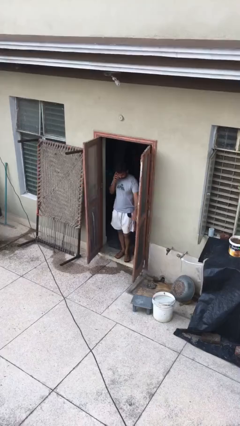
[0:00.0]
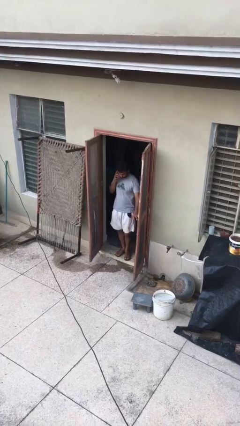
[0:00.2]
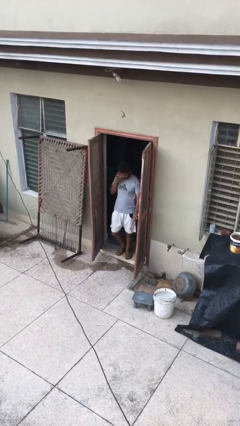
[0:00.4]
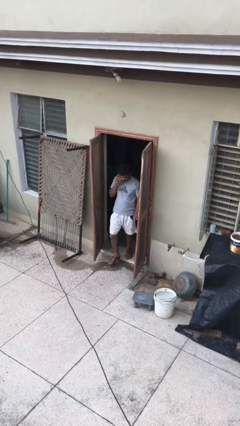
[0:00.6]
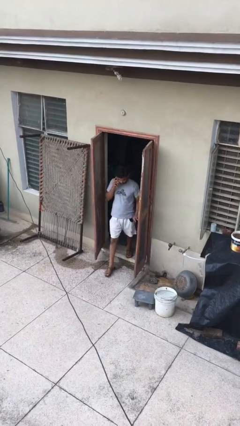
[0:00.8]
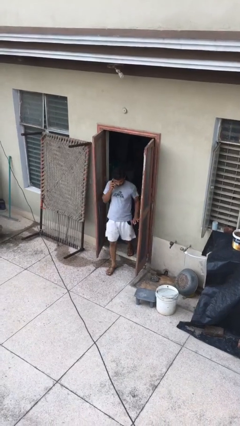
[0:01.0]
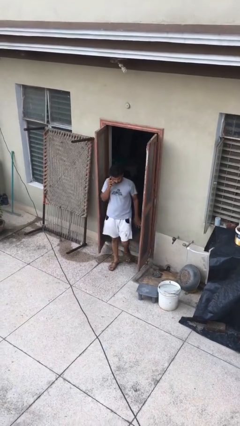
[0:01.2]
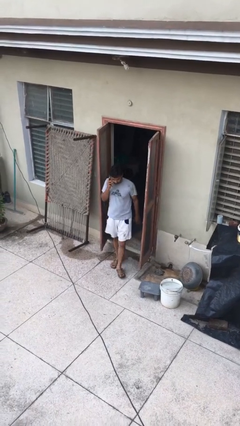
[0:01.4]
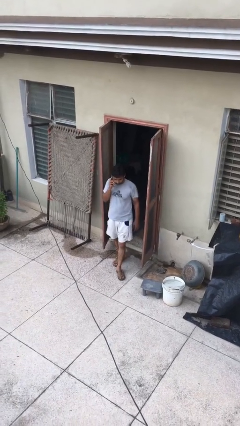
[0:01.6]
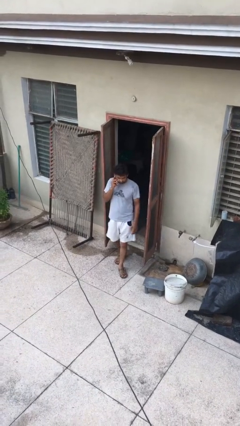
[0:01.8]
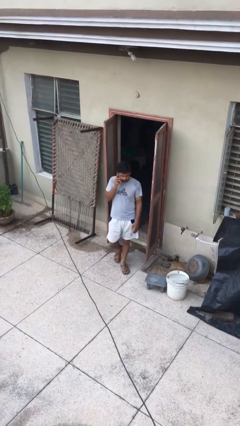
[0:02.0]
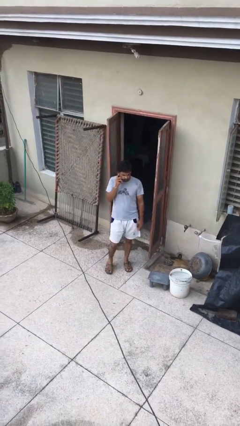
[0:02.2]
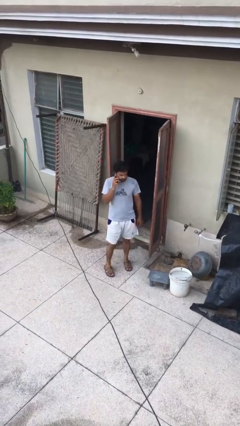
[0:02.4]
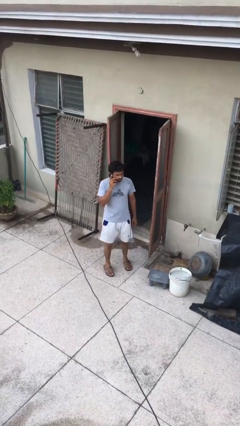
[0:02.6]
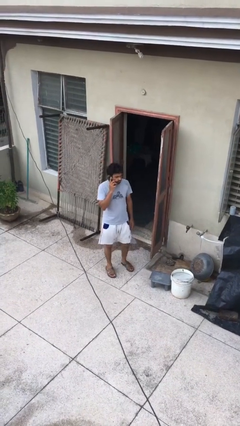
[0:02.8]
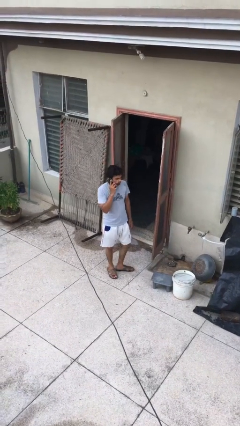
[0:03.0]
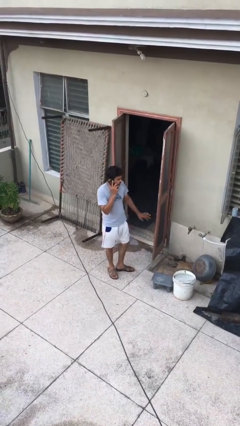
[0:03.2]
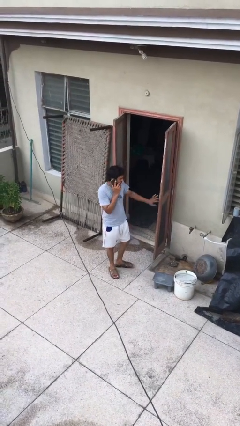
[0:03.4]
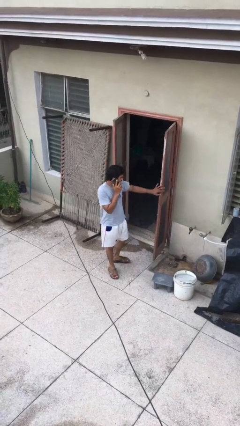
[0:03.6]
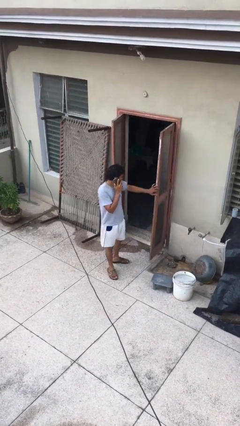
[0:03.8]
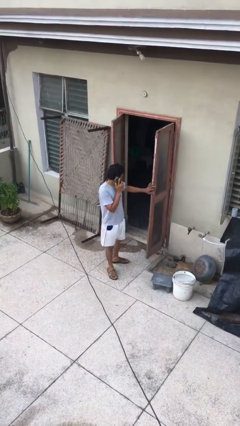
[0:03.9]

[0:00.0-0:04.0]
person enters scene through structure

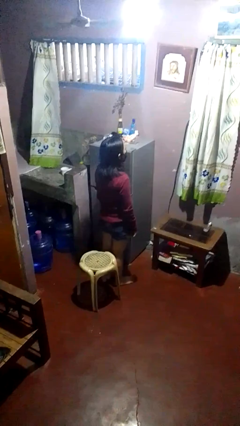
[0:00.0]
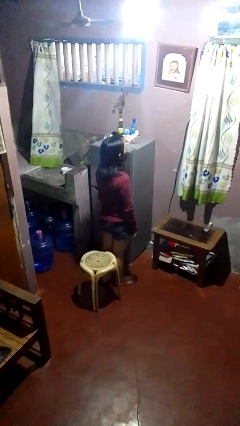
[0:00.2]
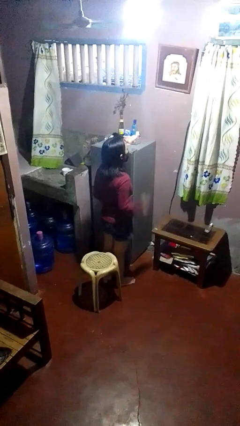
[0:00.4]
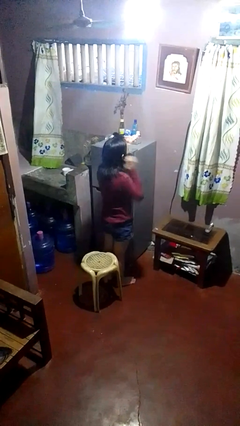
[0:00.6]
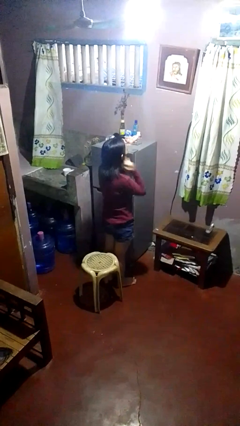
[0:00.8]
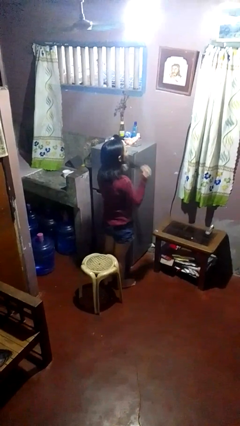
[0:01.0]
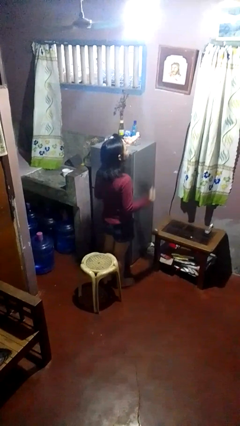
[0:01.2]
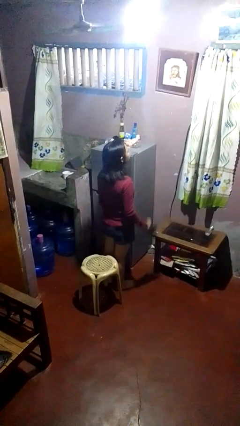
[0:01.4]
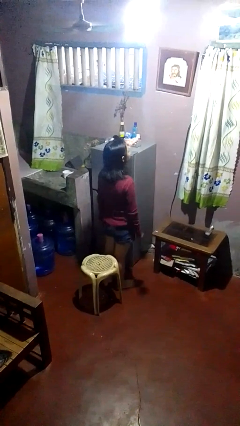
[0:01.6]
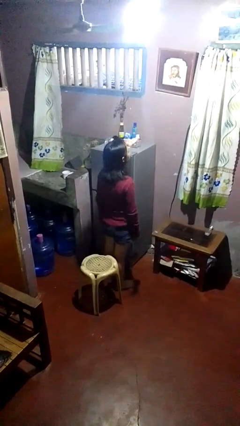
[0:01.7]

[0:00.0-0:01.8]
person takes off facemask

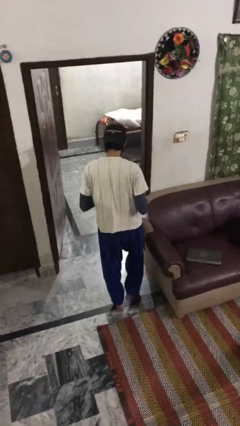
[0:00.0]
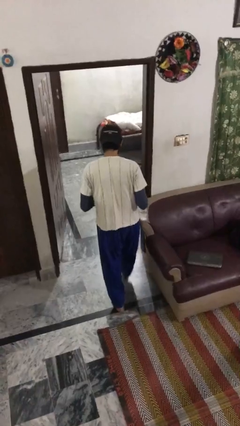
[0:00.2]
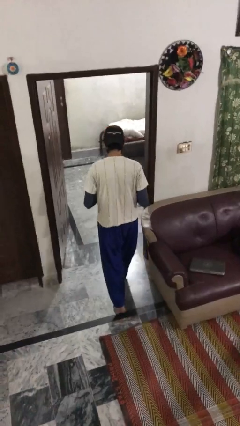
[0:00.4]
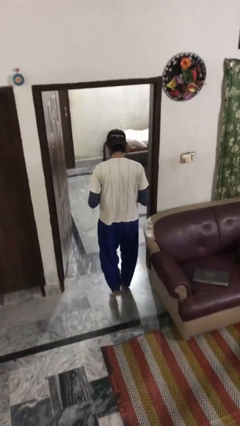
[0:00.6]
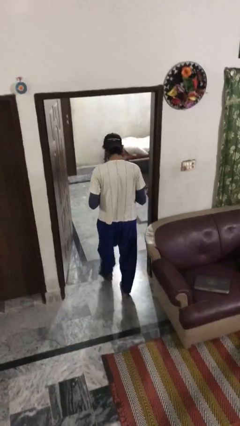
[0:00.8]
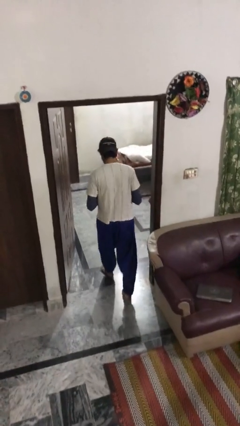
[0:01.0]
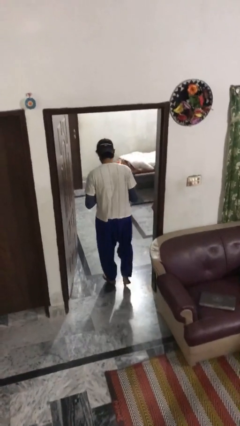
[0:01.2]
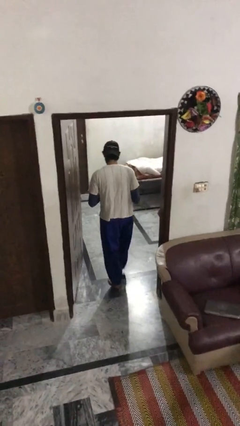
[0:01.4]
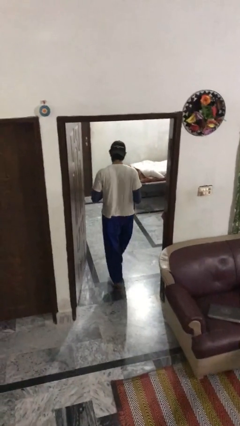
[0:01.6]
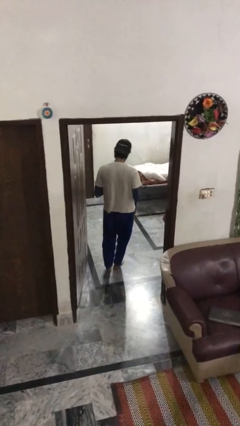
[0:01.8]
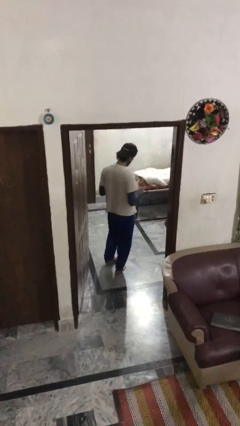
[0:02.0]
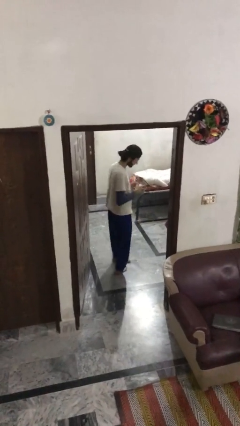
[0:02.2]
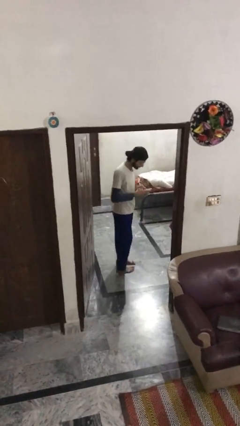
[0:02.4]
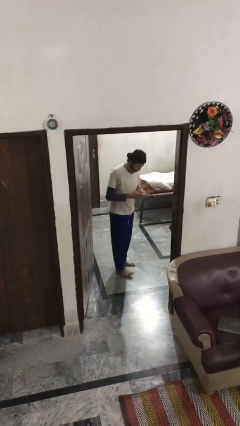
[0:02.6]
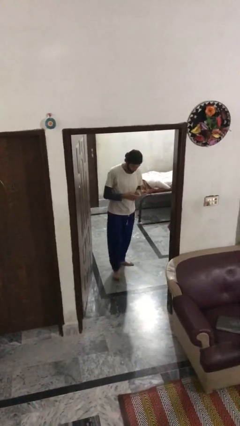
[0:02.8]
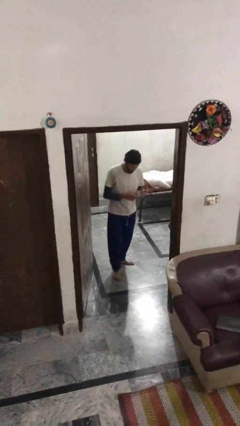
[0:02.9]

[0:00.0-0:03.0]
person exits scene through structure

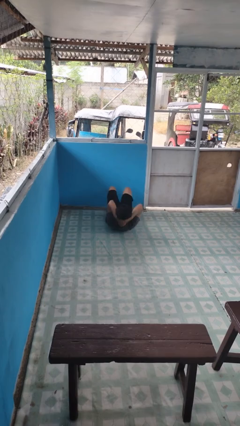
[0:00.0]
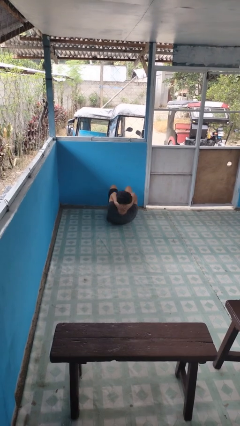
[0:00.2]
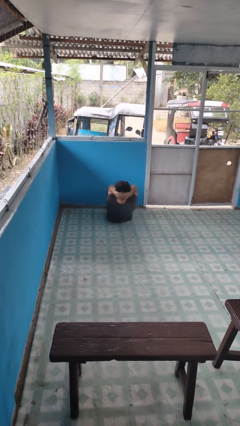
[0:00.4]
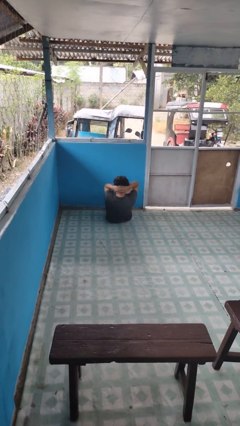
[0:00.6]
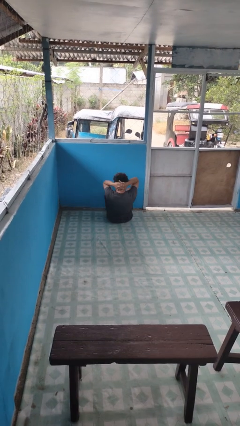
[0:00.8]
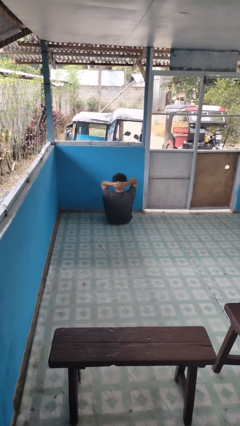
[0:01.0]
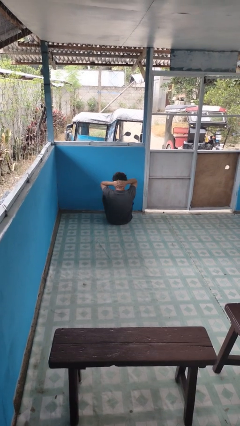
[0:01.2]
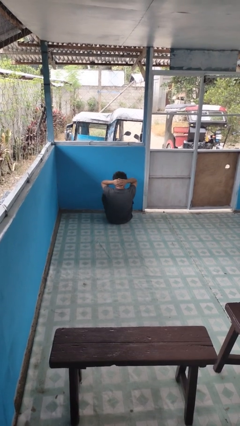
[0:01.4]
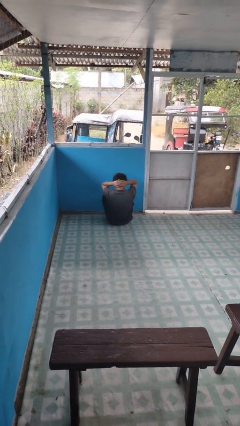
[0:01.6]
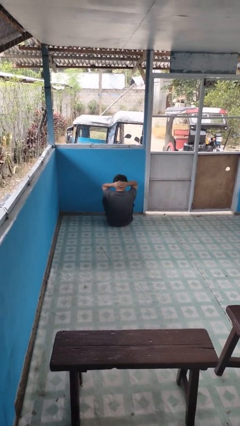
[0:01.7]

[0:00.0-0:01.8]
person exercises with situp

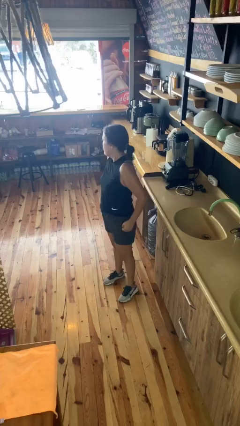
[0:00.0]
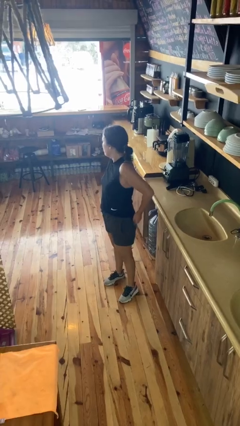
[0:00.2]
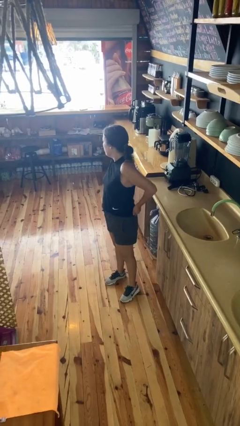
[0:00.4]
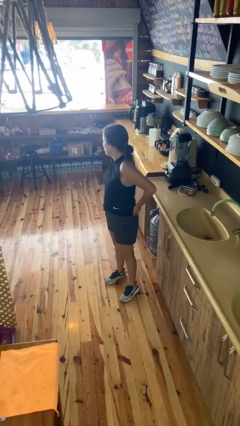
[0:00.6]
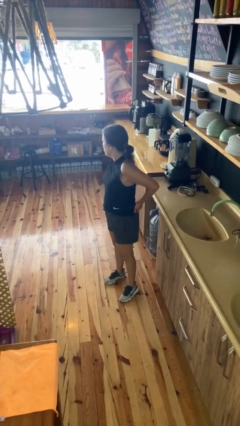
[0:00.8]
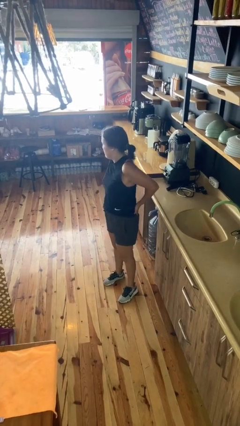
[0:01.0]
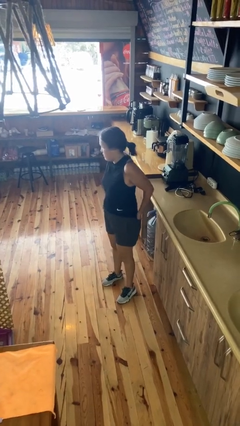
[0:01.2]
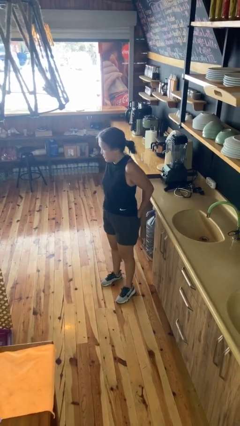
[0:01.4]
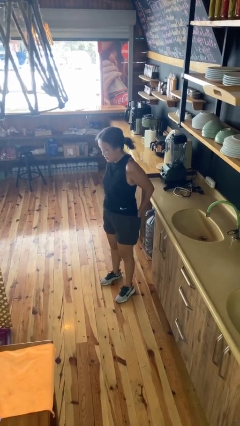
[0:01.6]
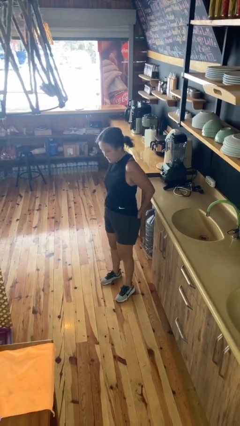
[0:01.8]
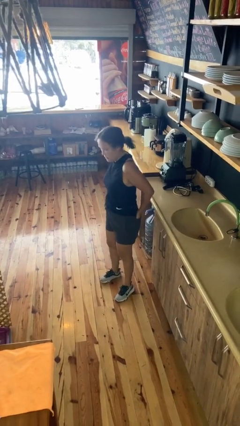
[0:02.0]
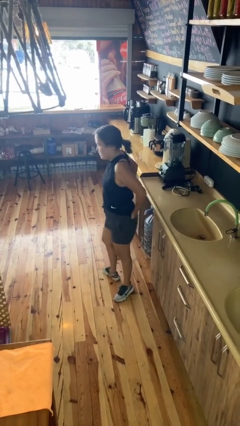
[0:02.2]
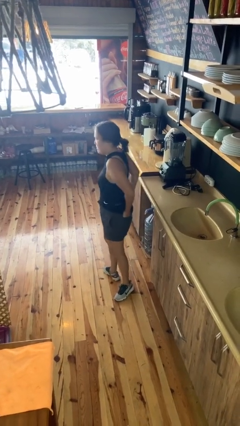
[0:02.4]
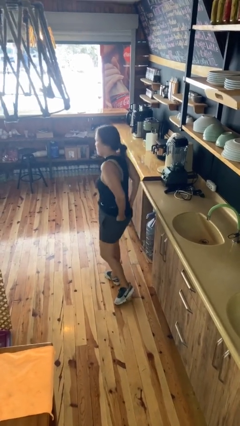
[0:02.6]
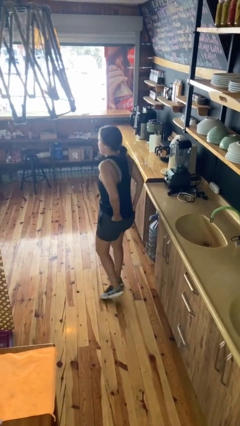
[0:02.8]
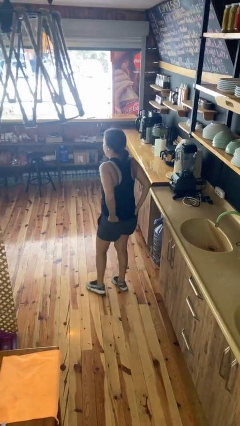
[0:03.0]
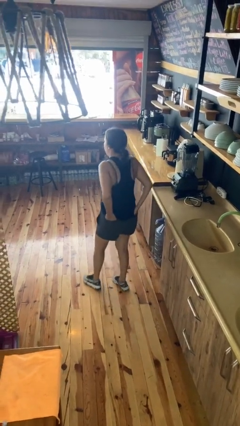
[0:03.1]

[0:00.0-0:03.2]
person puts hands in back pockets

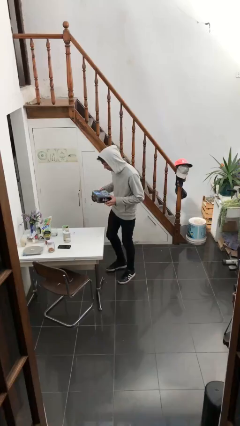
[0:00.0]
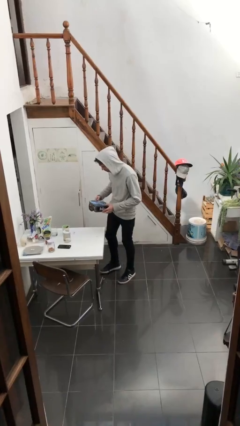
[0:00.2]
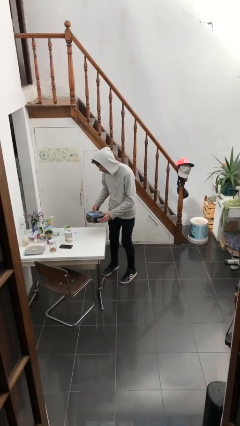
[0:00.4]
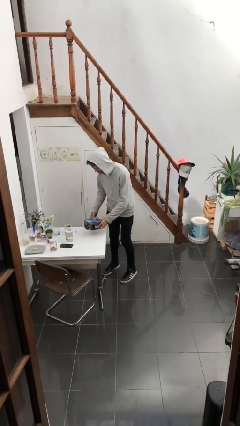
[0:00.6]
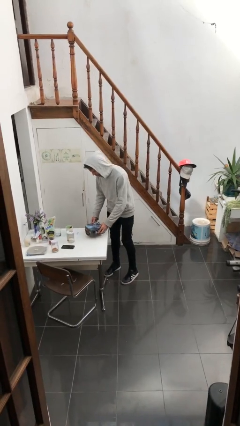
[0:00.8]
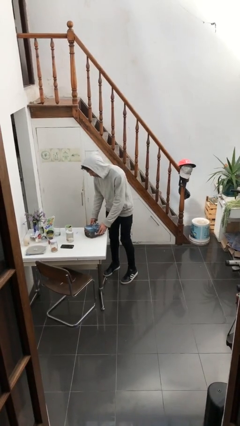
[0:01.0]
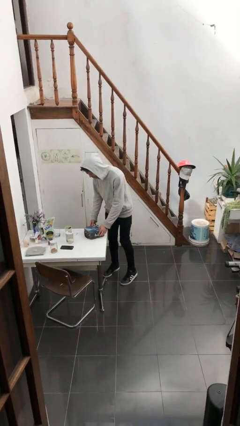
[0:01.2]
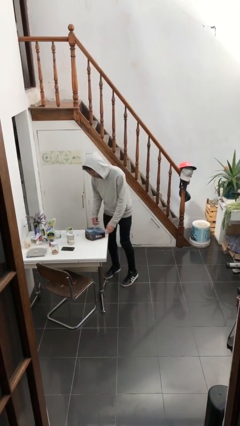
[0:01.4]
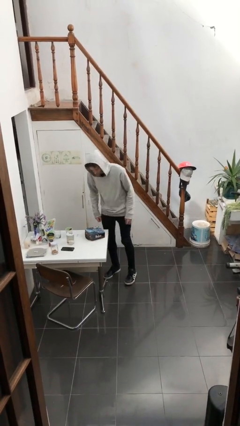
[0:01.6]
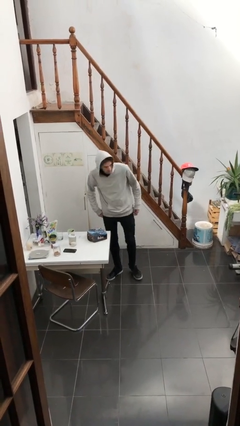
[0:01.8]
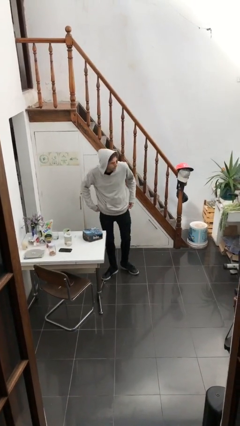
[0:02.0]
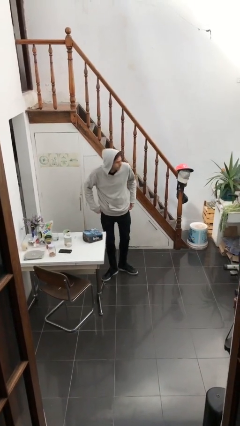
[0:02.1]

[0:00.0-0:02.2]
person puts down object on table

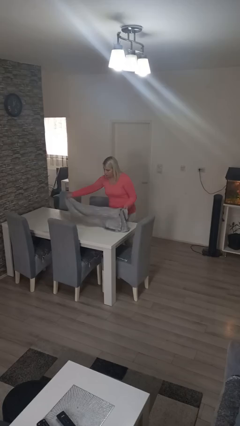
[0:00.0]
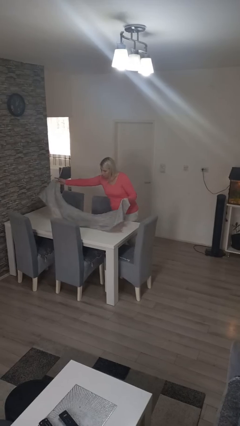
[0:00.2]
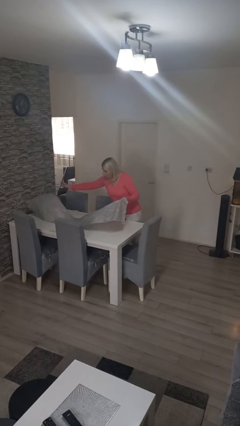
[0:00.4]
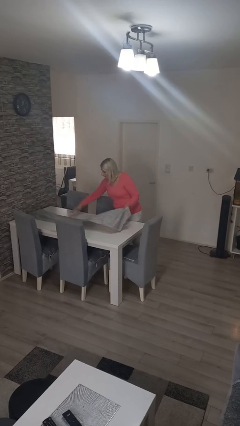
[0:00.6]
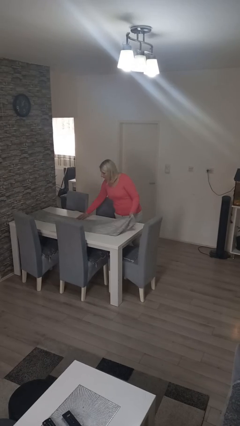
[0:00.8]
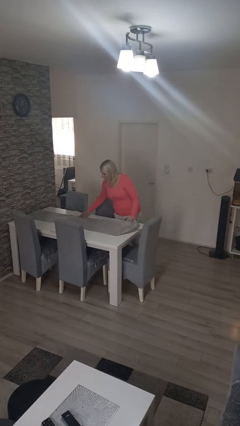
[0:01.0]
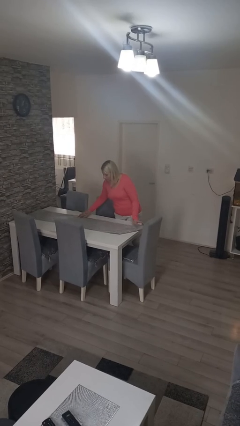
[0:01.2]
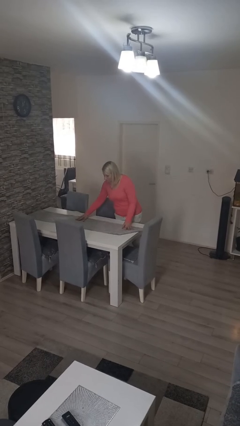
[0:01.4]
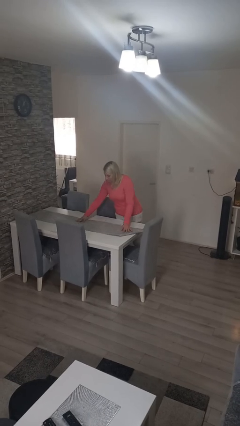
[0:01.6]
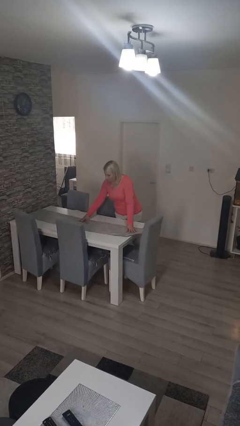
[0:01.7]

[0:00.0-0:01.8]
person spreads tablecloth
